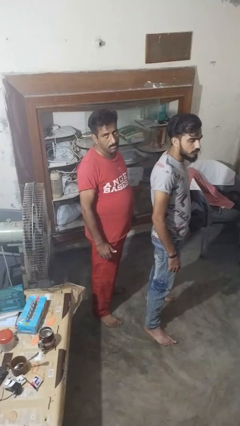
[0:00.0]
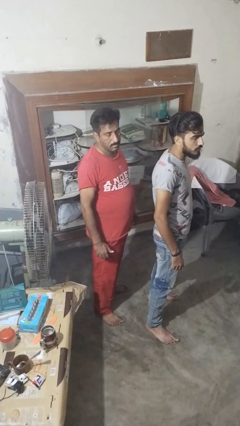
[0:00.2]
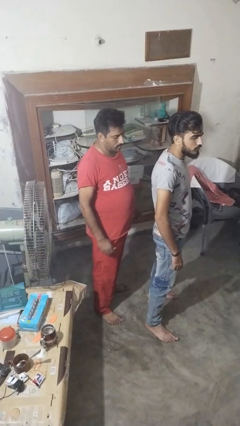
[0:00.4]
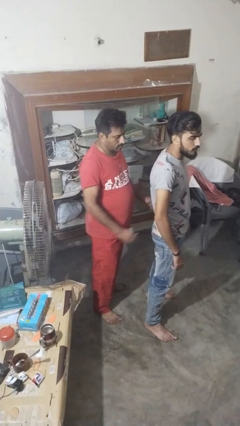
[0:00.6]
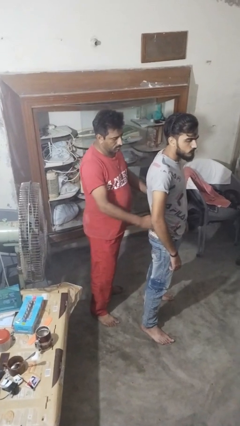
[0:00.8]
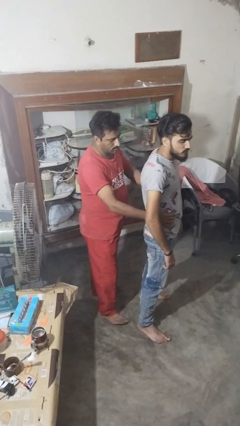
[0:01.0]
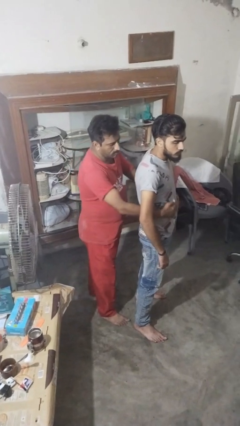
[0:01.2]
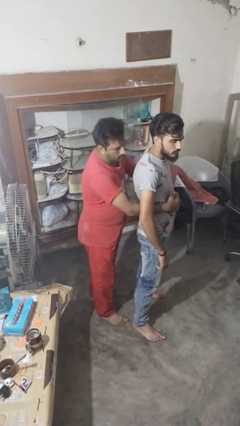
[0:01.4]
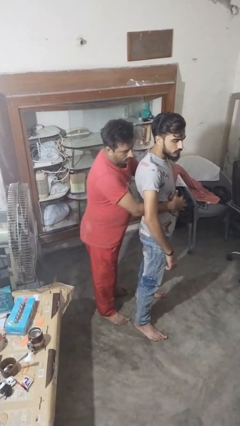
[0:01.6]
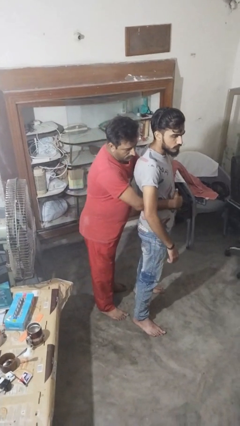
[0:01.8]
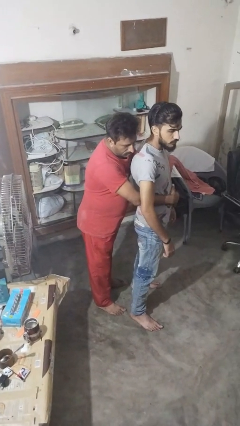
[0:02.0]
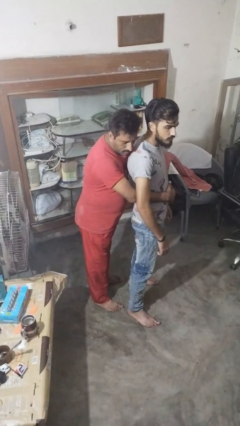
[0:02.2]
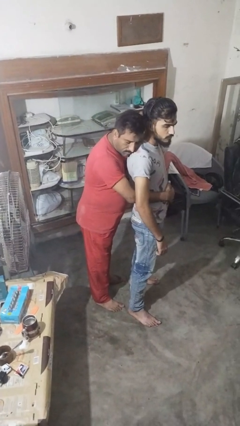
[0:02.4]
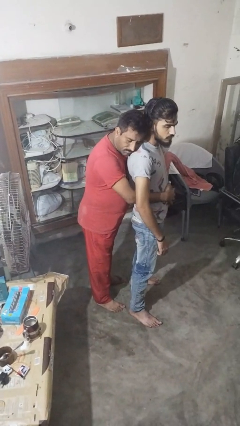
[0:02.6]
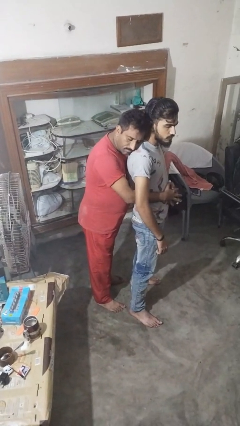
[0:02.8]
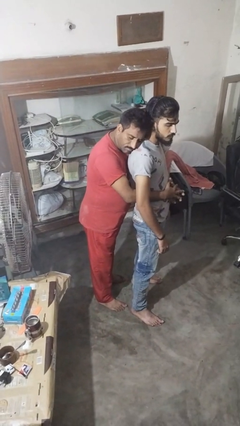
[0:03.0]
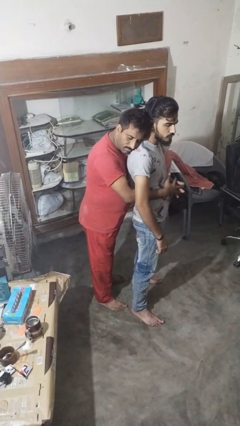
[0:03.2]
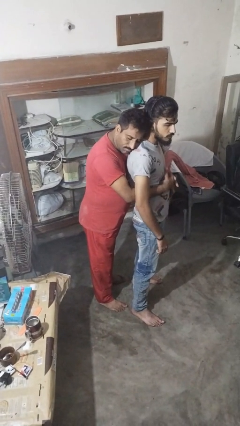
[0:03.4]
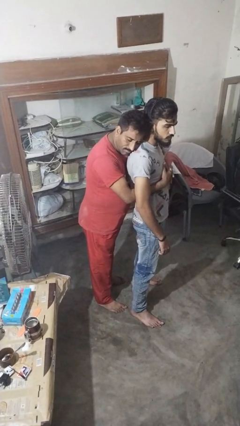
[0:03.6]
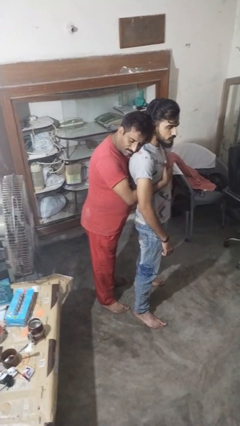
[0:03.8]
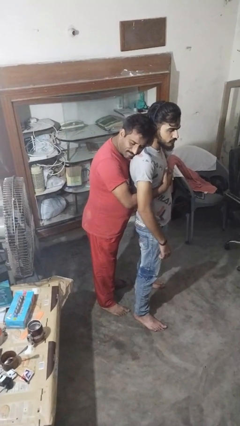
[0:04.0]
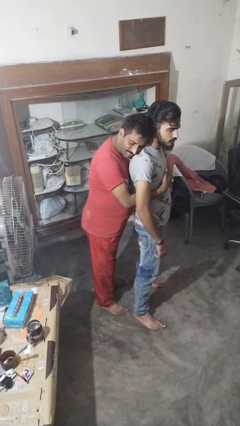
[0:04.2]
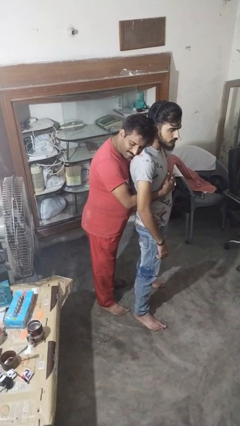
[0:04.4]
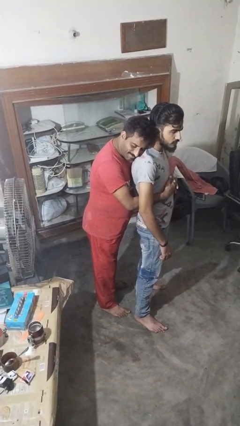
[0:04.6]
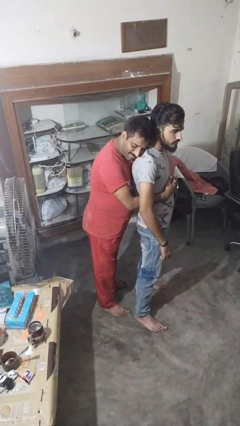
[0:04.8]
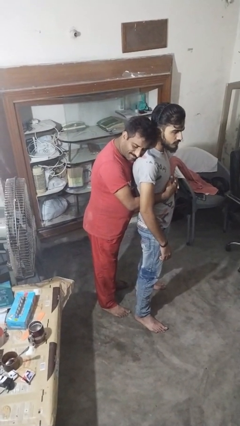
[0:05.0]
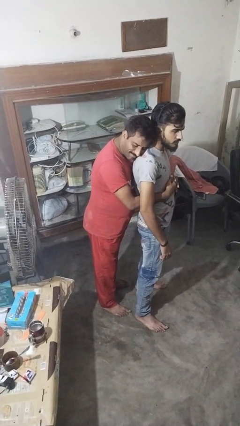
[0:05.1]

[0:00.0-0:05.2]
person hugs person from behind

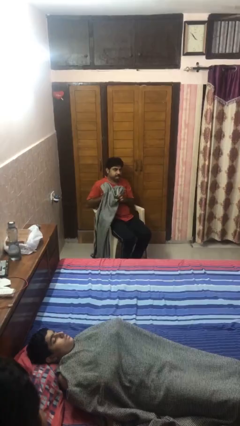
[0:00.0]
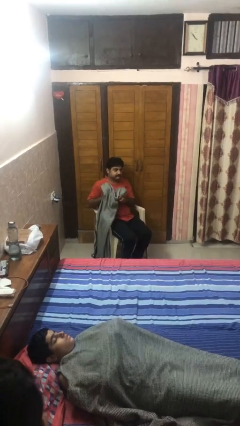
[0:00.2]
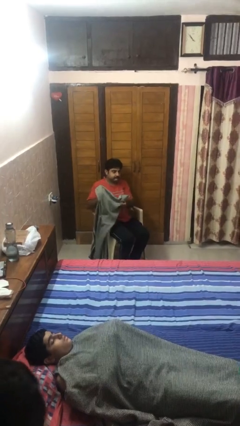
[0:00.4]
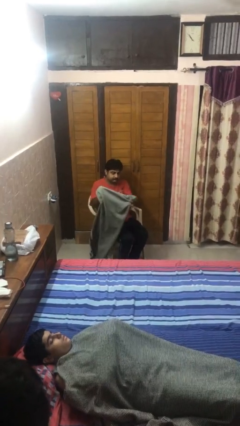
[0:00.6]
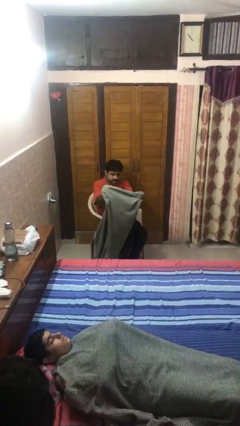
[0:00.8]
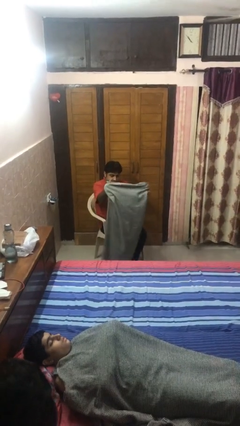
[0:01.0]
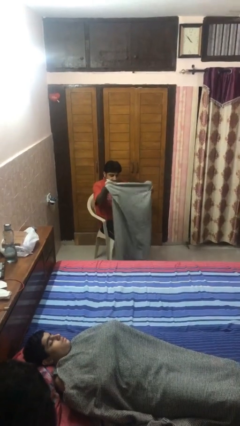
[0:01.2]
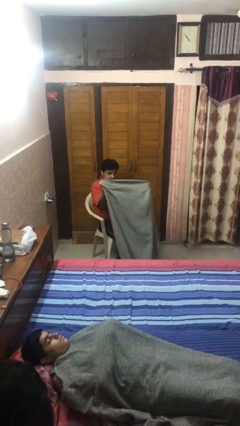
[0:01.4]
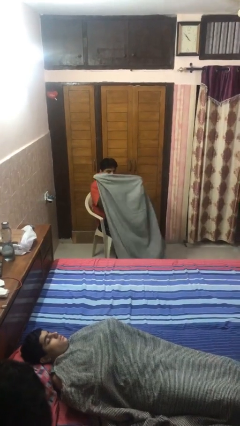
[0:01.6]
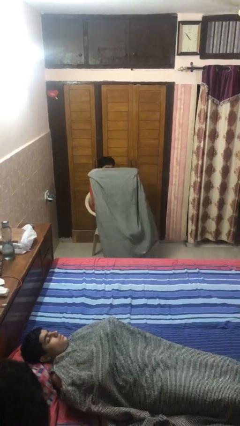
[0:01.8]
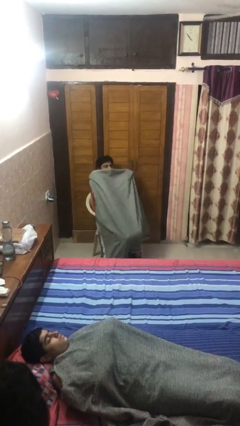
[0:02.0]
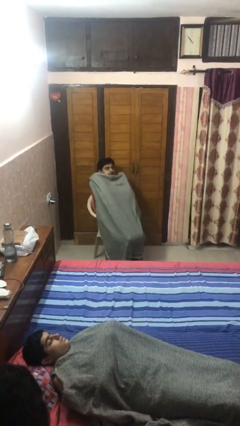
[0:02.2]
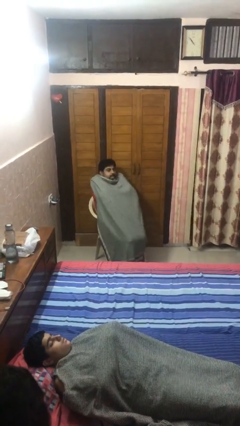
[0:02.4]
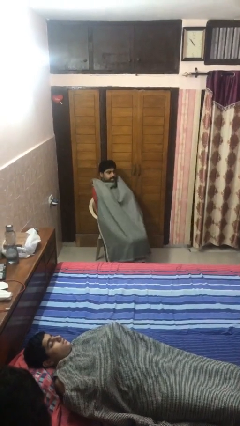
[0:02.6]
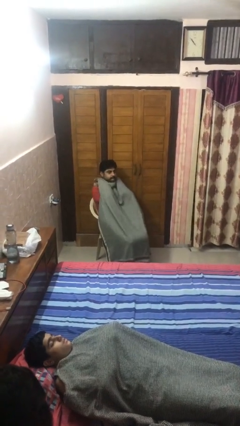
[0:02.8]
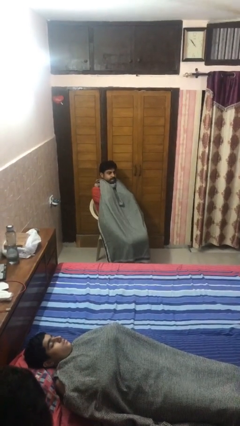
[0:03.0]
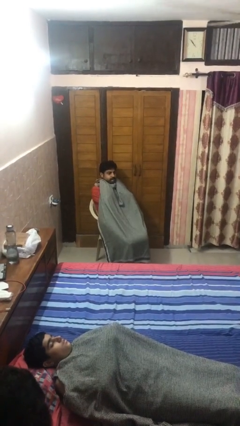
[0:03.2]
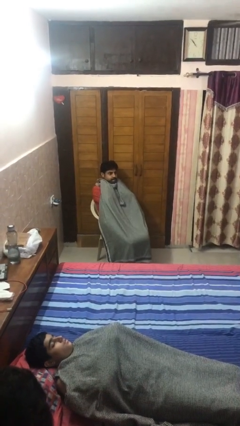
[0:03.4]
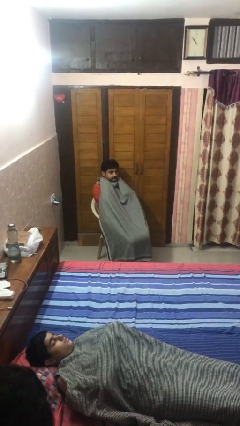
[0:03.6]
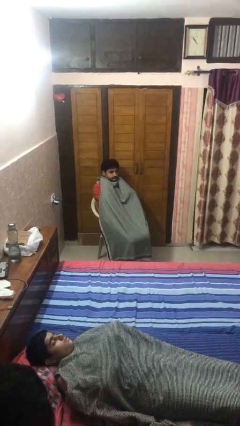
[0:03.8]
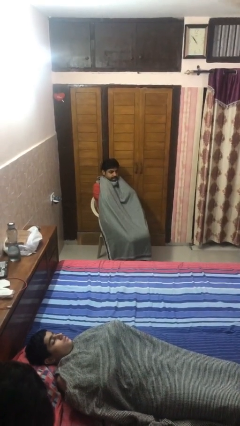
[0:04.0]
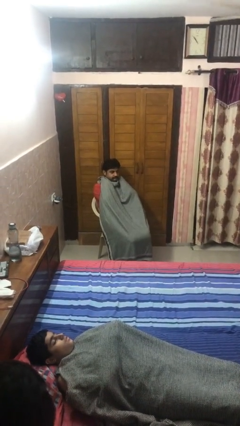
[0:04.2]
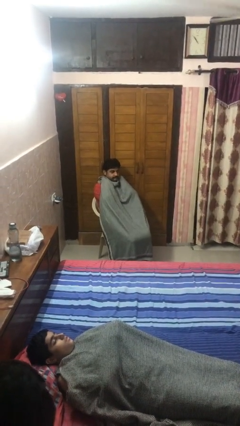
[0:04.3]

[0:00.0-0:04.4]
person covers with blanket

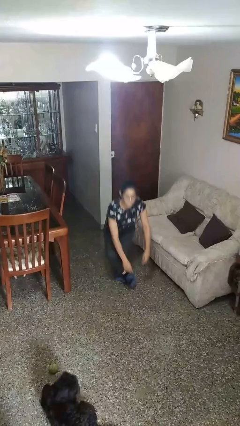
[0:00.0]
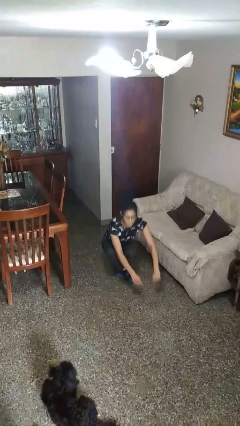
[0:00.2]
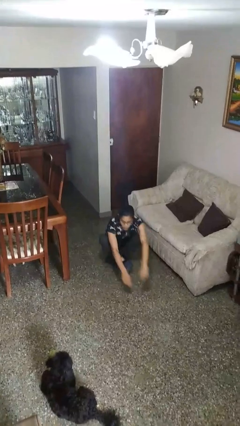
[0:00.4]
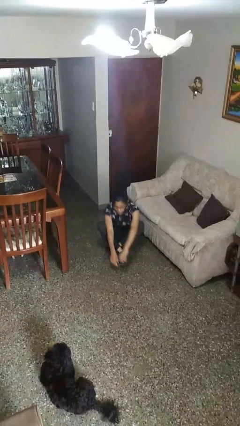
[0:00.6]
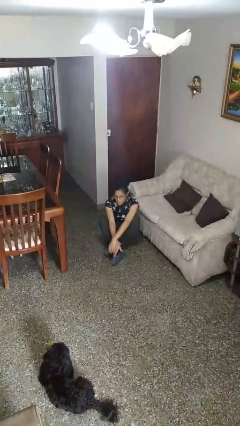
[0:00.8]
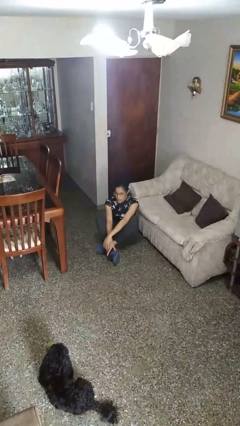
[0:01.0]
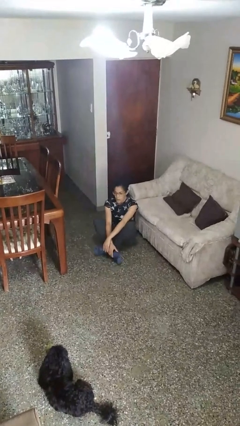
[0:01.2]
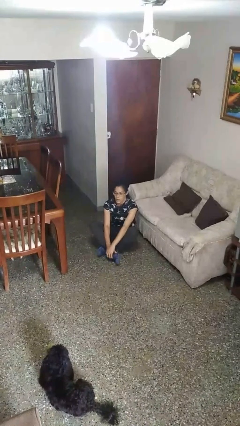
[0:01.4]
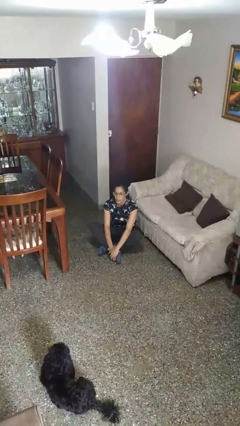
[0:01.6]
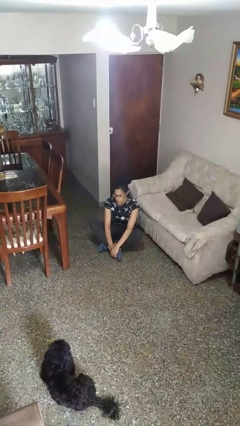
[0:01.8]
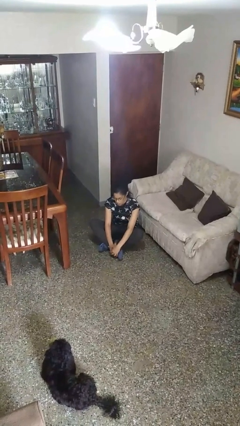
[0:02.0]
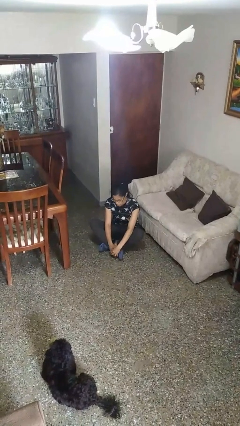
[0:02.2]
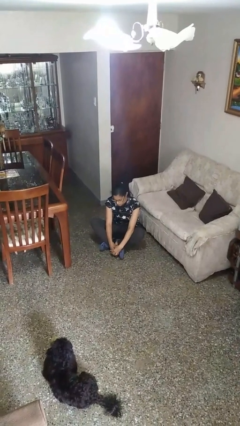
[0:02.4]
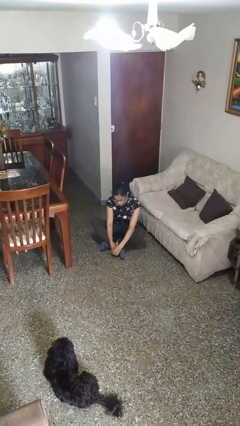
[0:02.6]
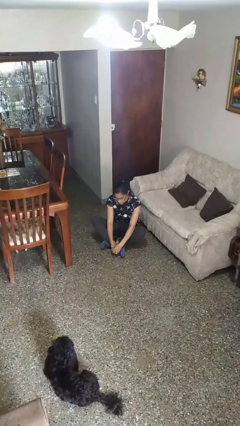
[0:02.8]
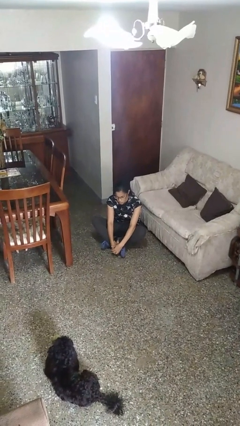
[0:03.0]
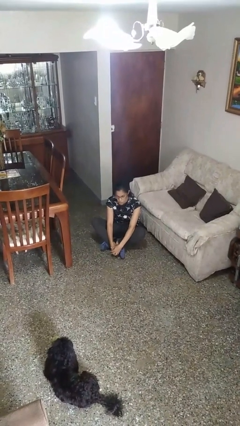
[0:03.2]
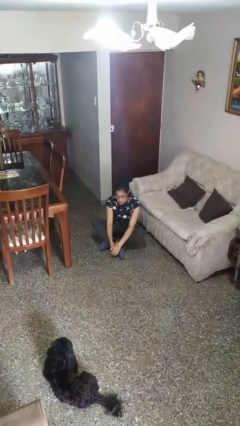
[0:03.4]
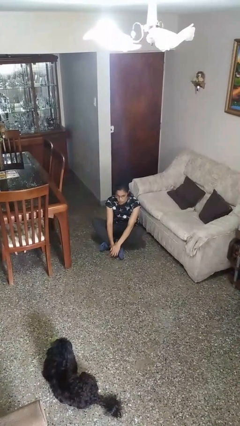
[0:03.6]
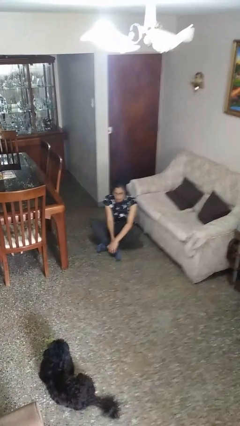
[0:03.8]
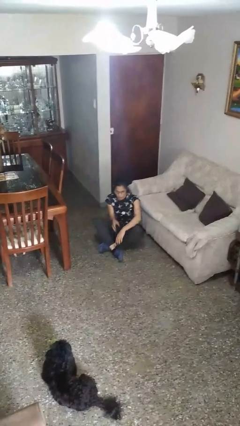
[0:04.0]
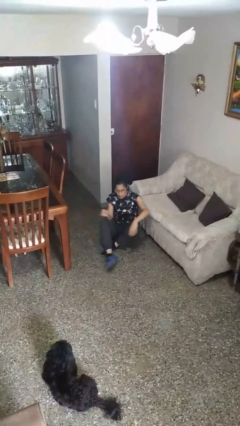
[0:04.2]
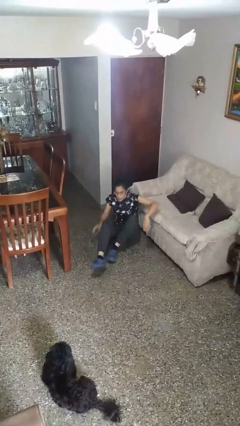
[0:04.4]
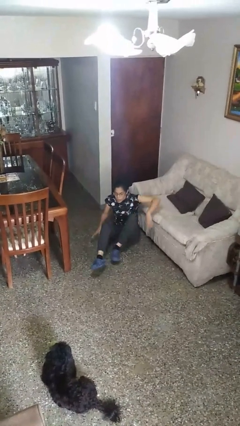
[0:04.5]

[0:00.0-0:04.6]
person sits crisscross

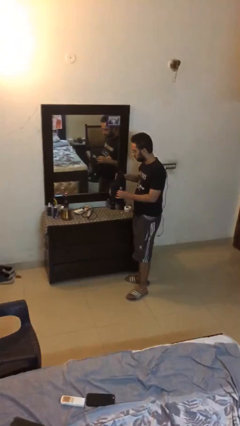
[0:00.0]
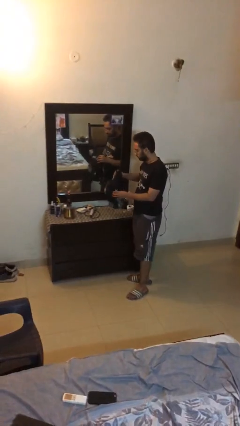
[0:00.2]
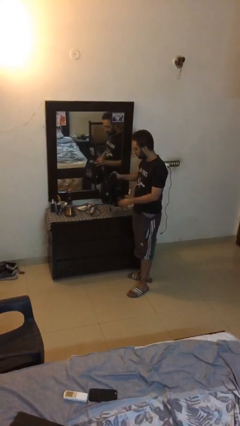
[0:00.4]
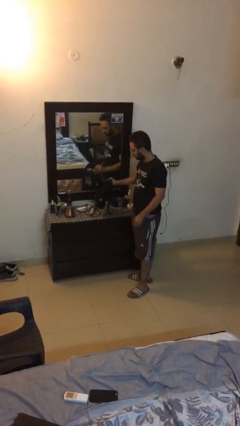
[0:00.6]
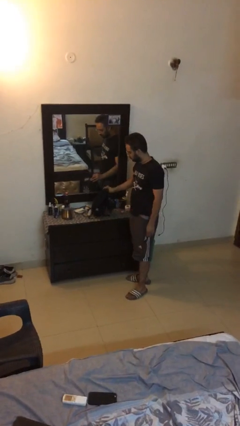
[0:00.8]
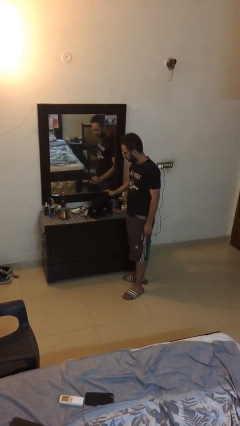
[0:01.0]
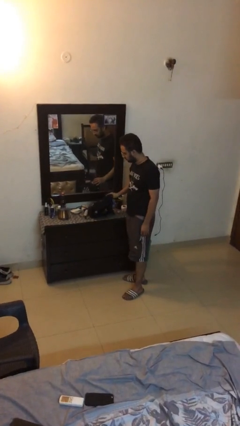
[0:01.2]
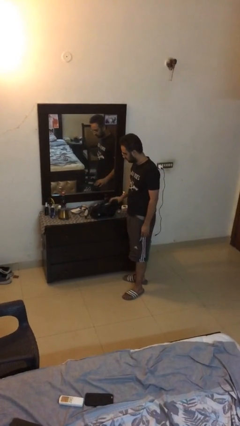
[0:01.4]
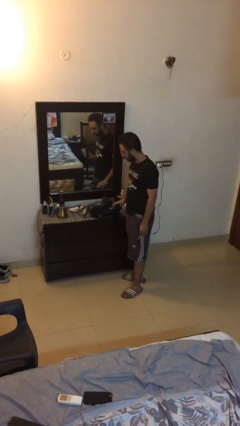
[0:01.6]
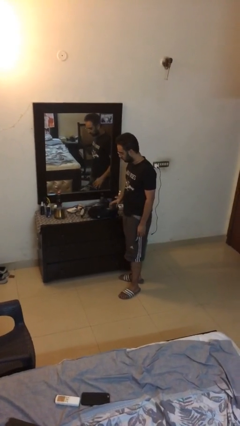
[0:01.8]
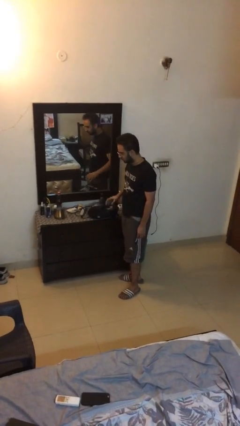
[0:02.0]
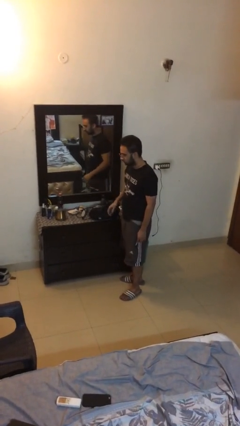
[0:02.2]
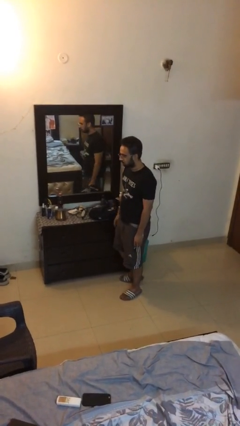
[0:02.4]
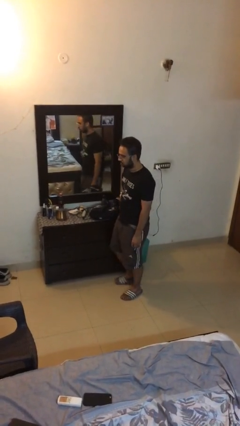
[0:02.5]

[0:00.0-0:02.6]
person puts down object on table

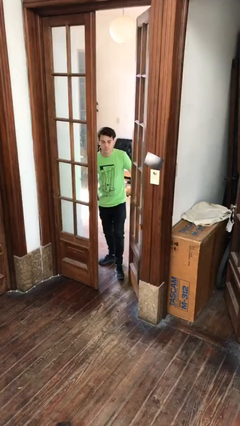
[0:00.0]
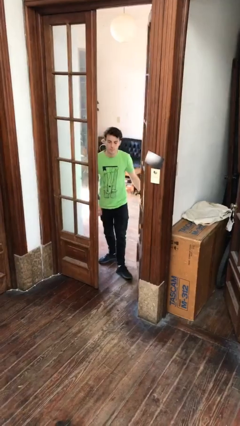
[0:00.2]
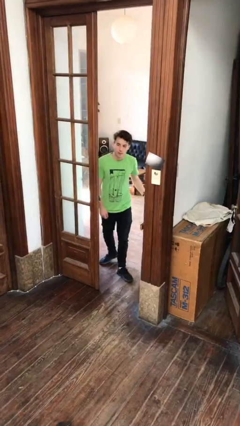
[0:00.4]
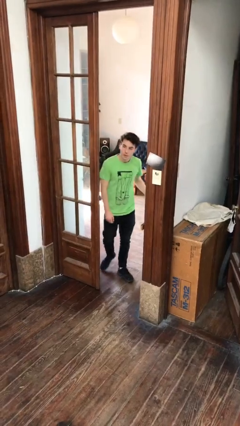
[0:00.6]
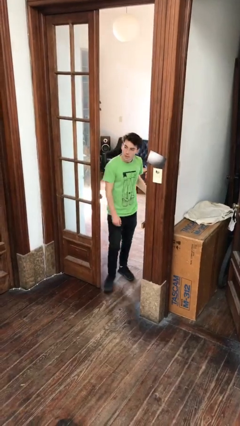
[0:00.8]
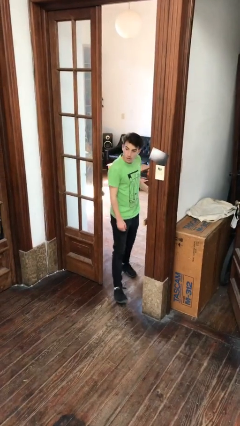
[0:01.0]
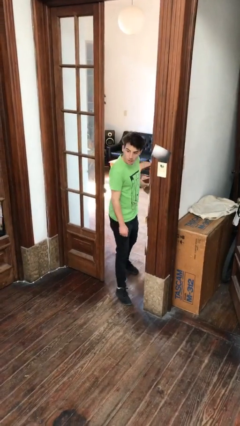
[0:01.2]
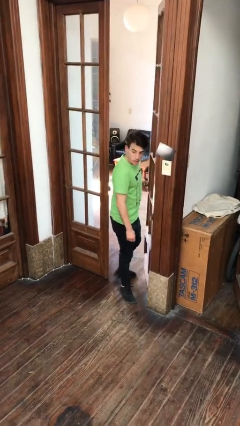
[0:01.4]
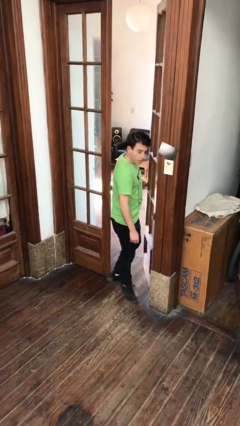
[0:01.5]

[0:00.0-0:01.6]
person enters scene through structure
